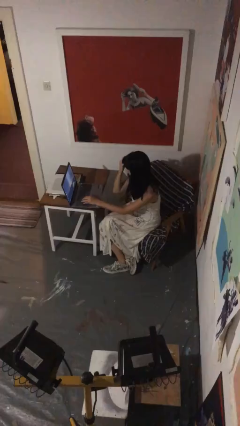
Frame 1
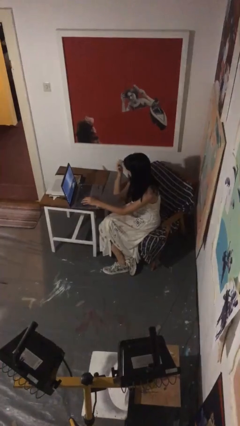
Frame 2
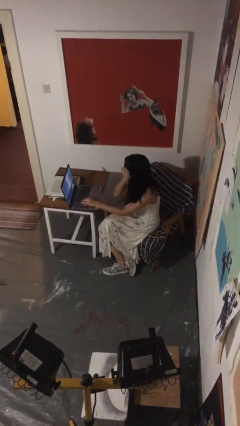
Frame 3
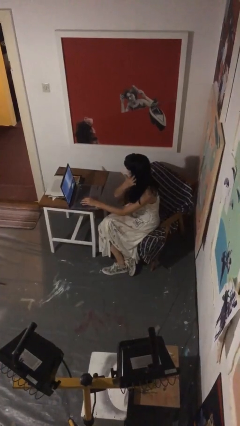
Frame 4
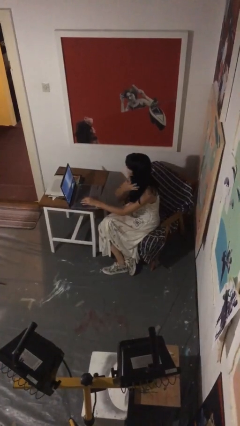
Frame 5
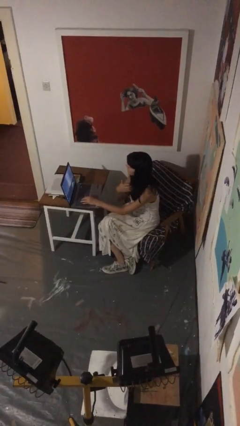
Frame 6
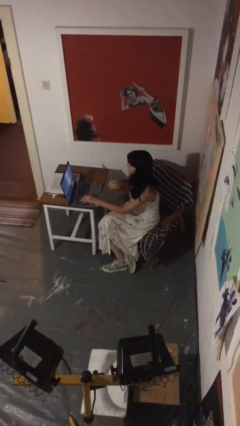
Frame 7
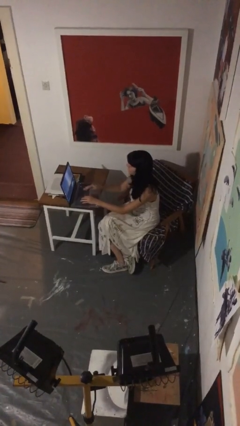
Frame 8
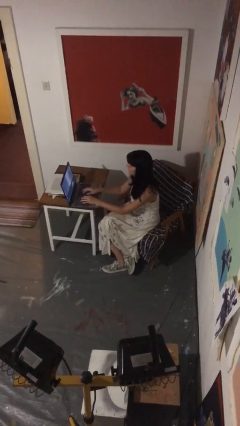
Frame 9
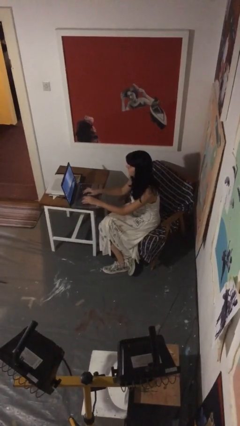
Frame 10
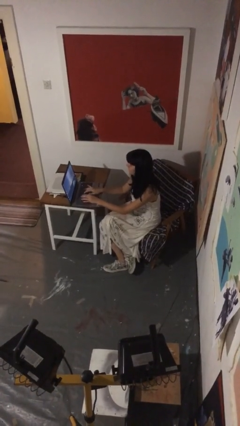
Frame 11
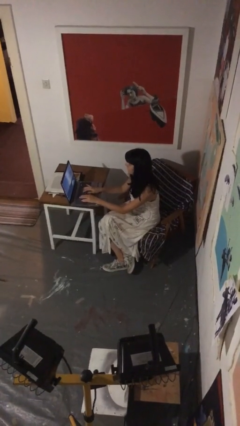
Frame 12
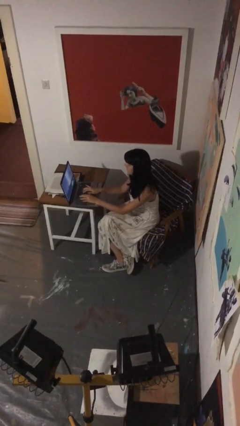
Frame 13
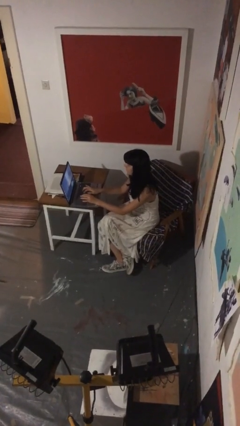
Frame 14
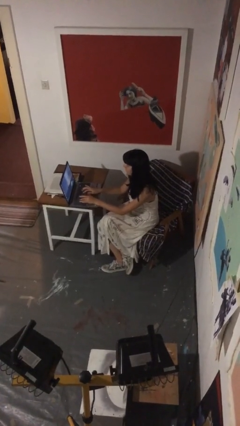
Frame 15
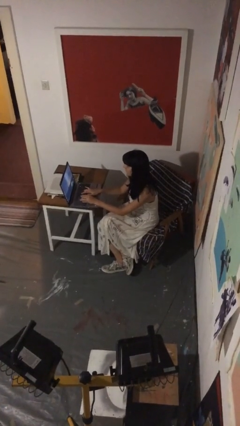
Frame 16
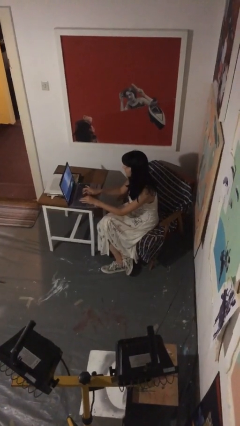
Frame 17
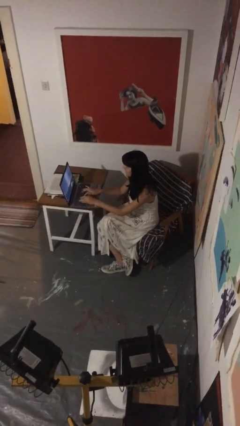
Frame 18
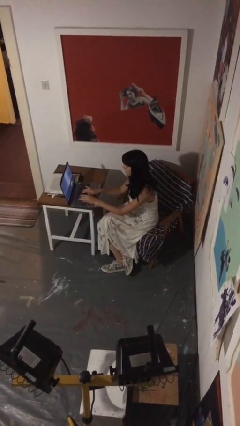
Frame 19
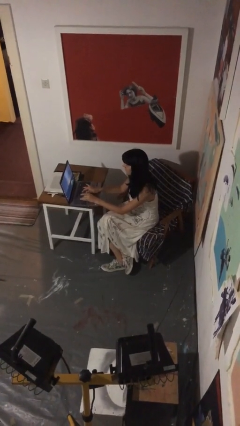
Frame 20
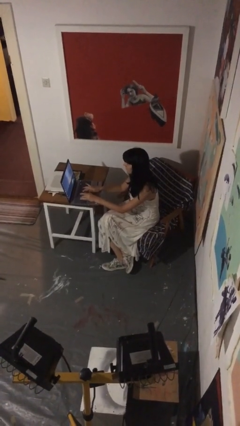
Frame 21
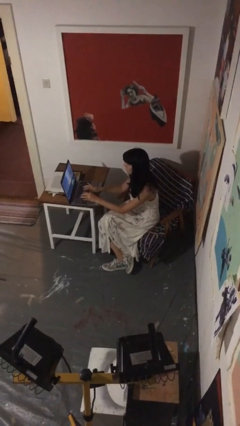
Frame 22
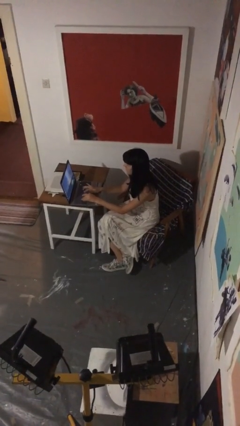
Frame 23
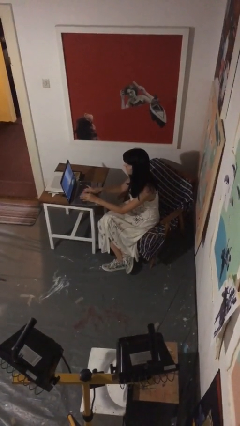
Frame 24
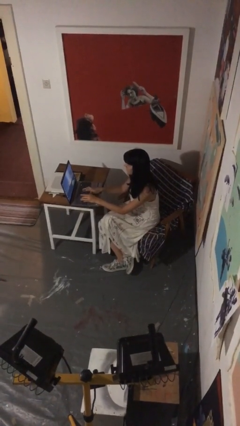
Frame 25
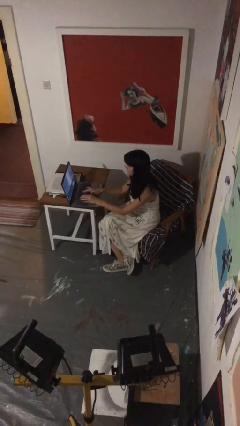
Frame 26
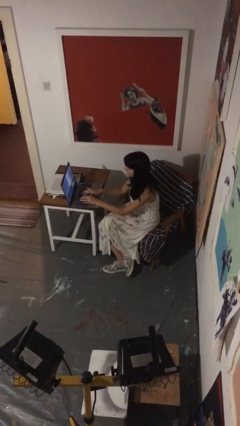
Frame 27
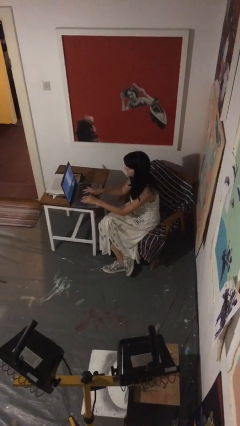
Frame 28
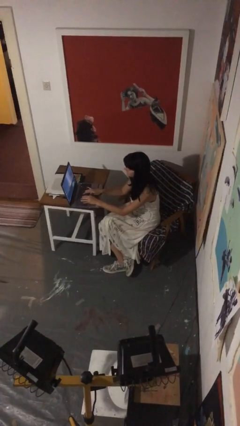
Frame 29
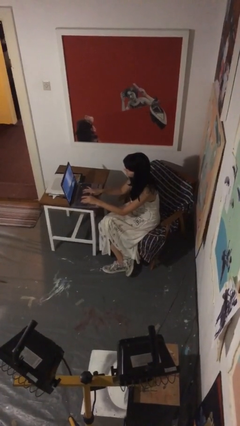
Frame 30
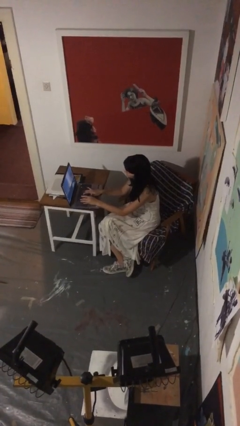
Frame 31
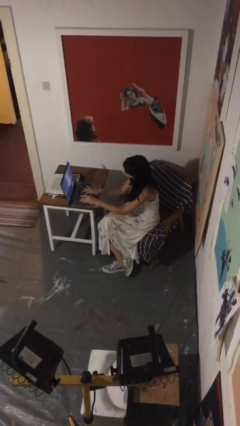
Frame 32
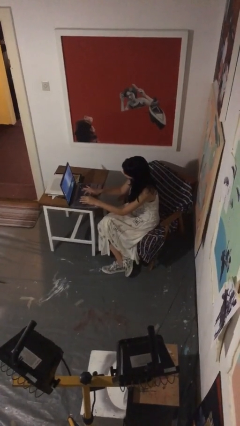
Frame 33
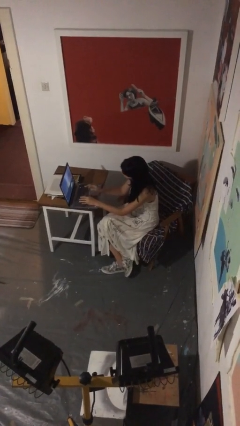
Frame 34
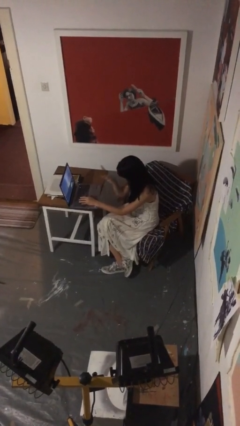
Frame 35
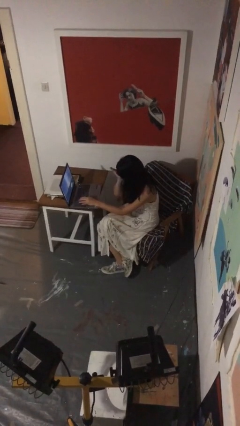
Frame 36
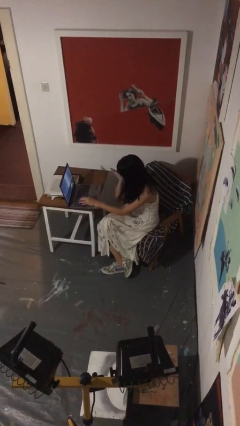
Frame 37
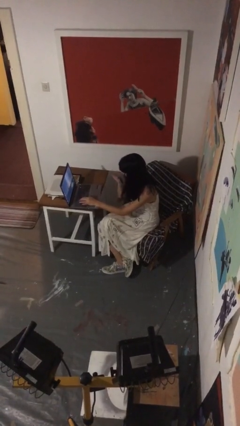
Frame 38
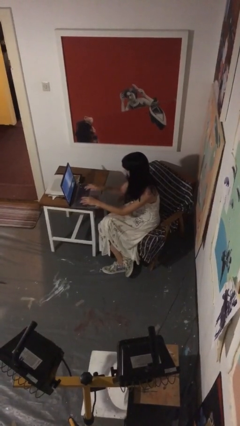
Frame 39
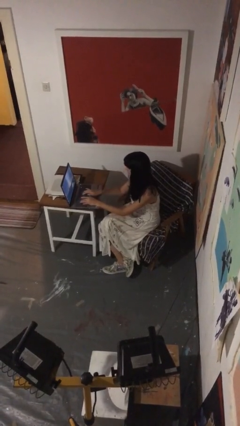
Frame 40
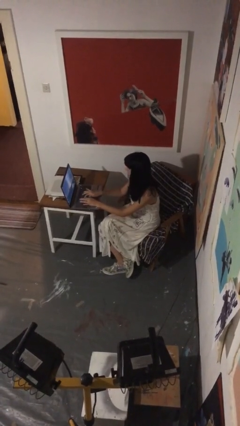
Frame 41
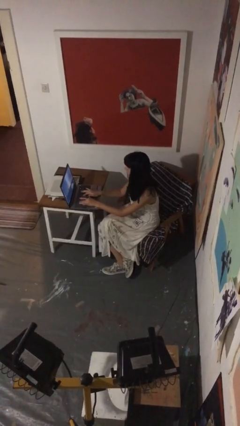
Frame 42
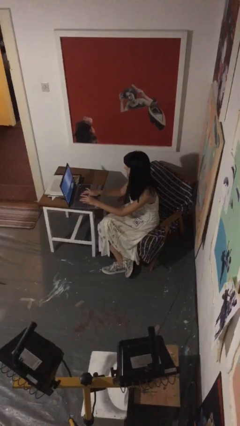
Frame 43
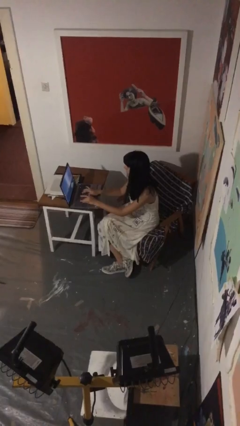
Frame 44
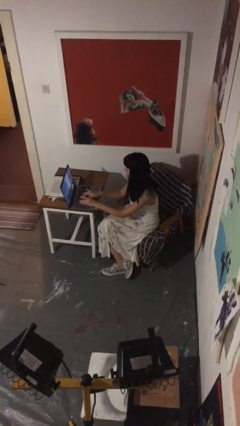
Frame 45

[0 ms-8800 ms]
person interacts with laptop

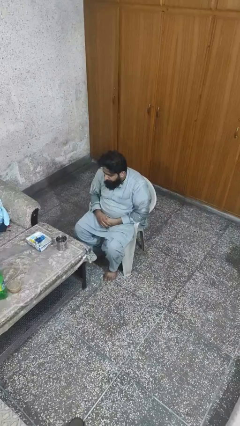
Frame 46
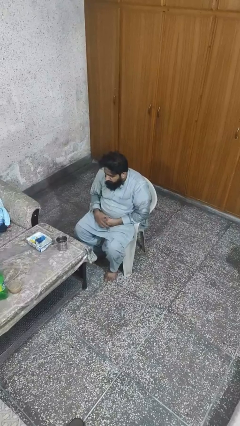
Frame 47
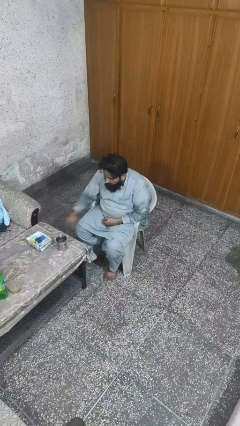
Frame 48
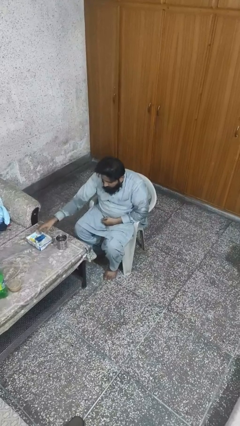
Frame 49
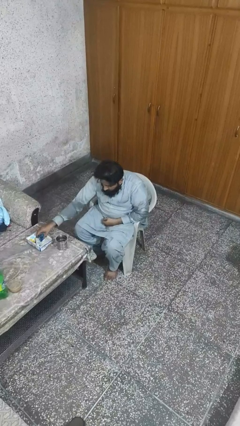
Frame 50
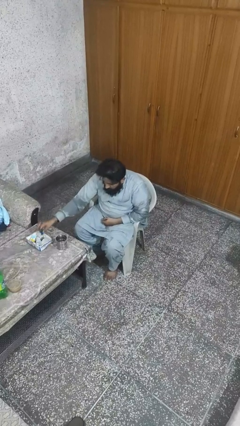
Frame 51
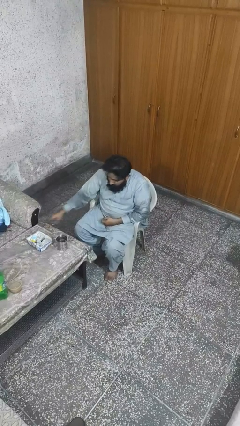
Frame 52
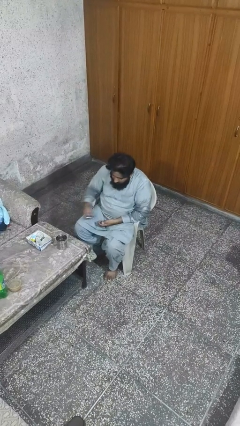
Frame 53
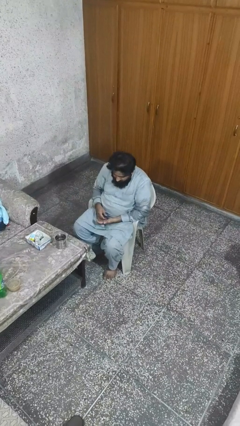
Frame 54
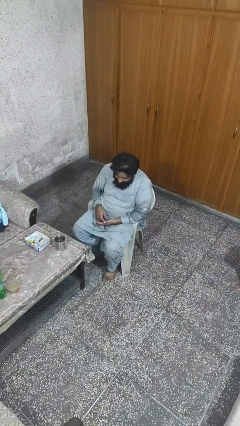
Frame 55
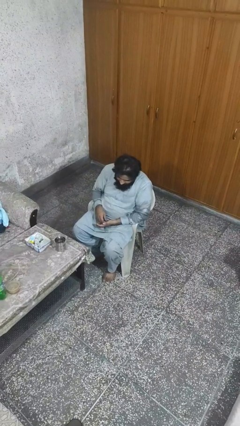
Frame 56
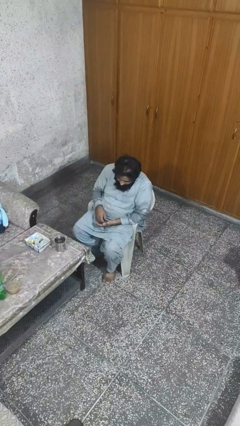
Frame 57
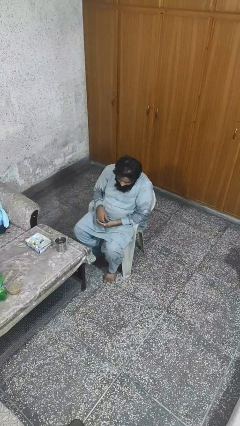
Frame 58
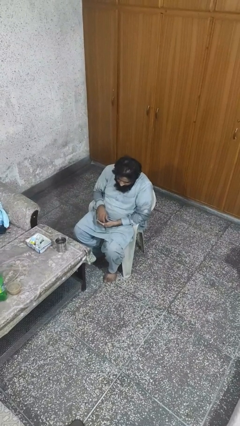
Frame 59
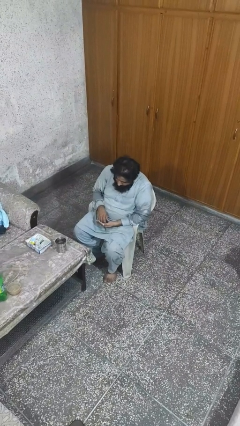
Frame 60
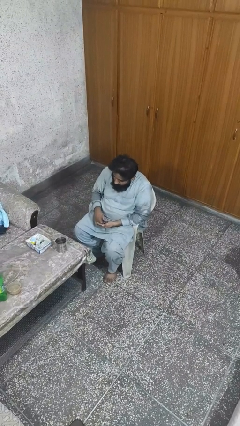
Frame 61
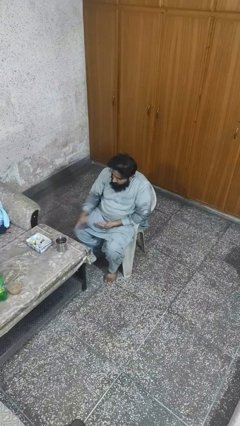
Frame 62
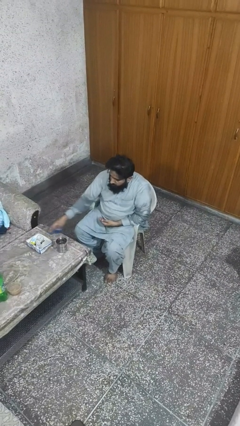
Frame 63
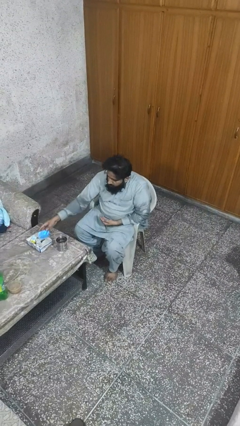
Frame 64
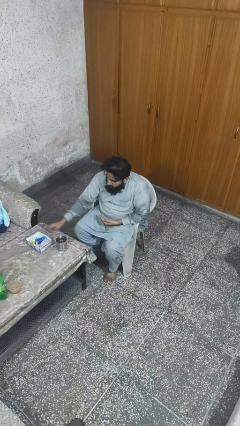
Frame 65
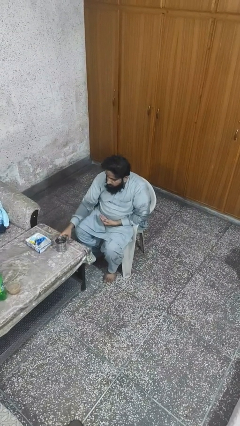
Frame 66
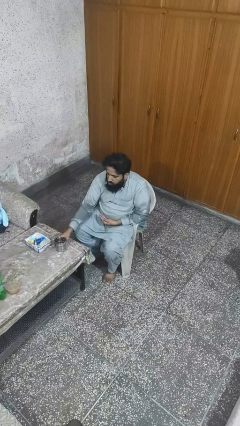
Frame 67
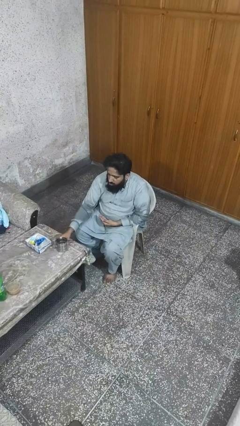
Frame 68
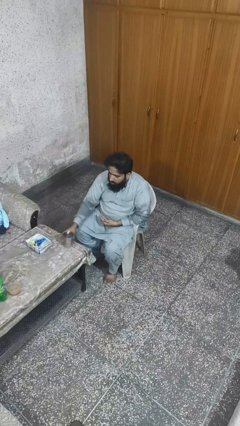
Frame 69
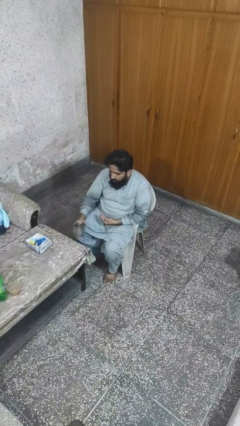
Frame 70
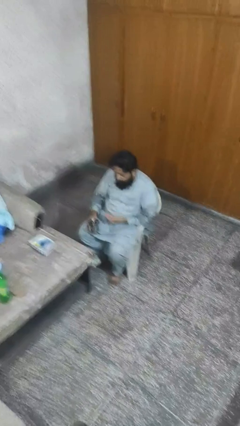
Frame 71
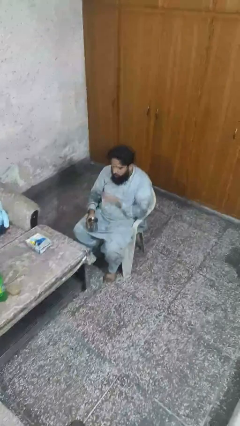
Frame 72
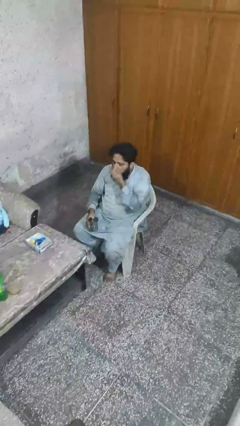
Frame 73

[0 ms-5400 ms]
person takes medicine pills

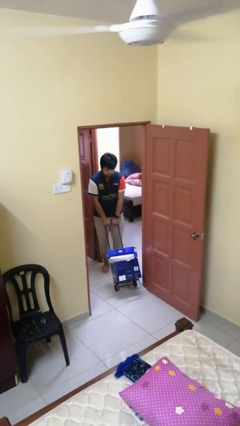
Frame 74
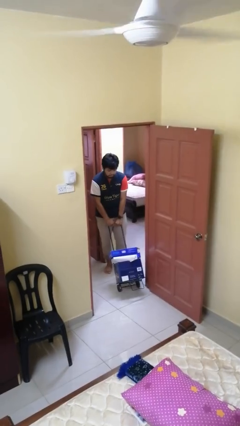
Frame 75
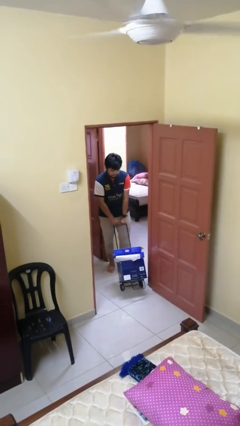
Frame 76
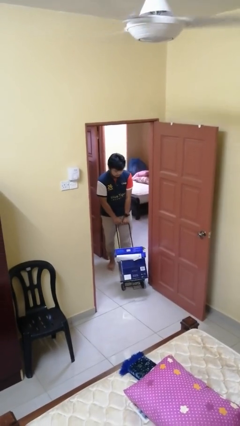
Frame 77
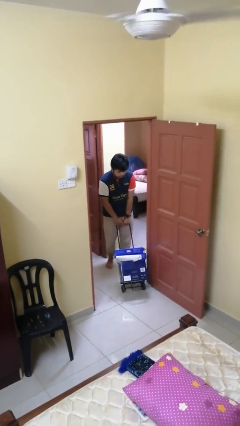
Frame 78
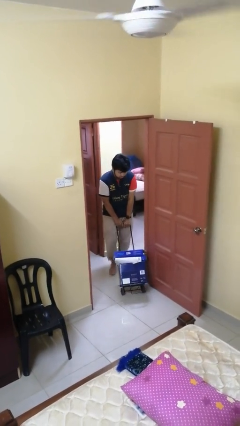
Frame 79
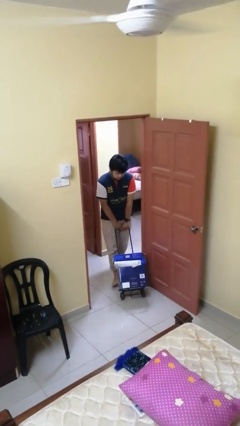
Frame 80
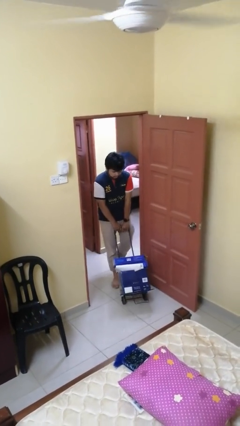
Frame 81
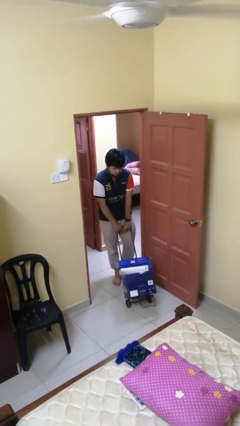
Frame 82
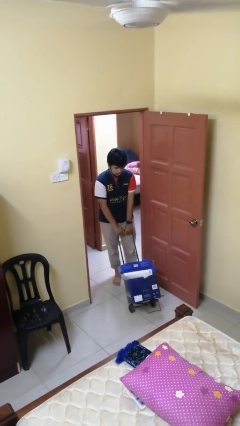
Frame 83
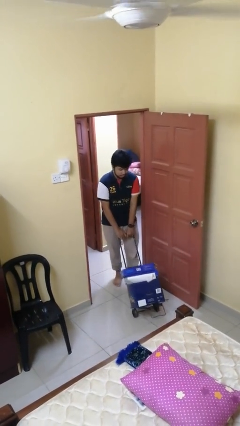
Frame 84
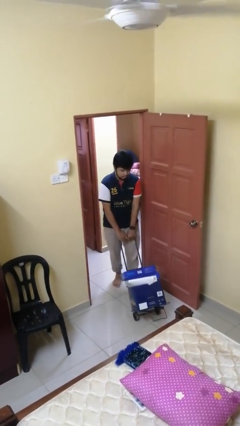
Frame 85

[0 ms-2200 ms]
person pushes wheeled cart

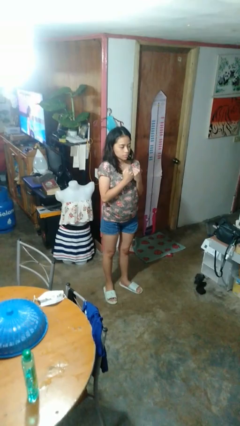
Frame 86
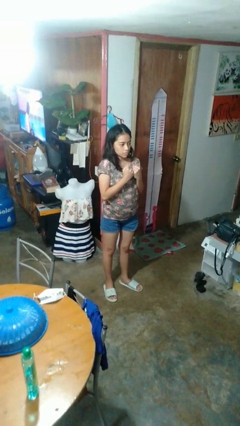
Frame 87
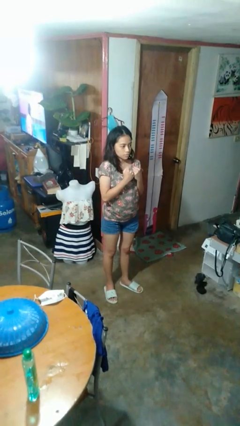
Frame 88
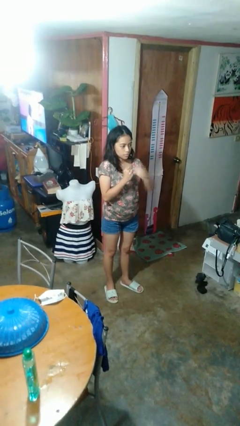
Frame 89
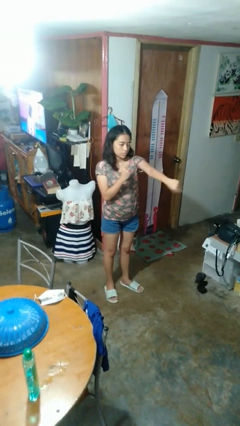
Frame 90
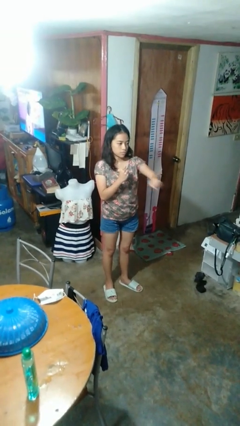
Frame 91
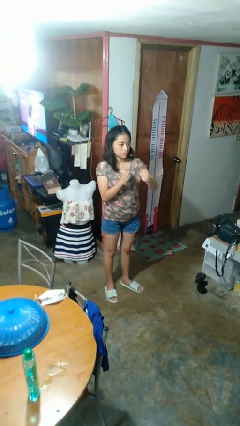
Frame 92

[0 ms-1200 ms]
person punches
